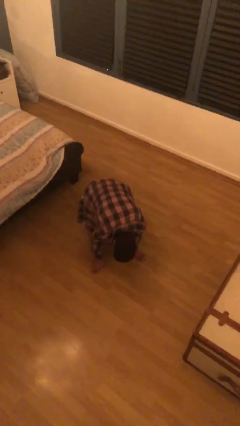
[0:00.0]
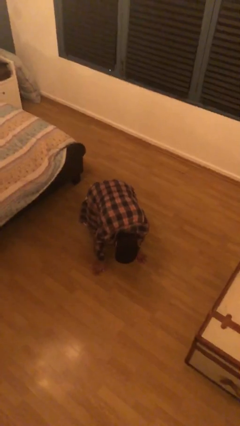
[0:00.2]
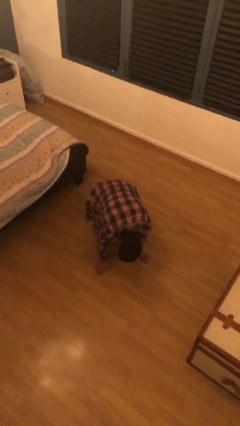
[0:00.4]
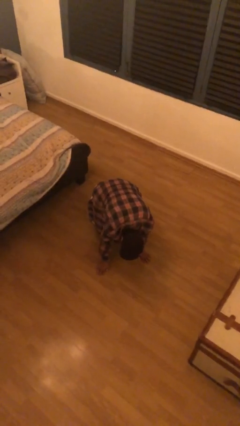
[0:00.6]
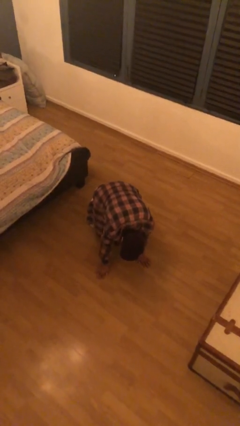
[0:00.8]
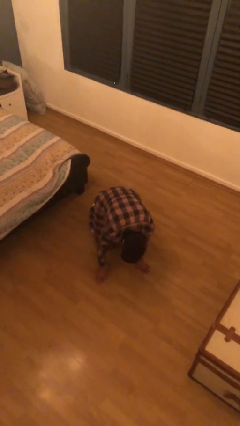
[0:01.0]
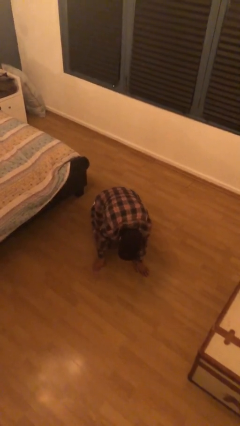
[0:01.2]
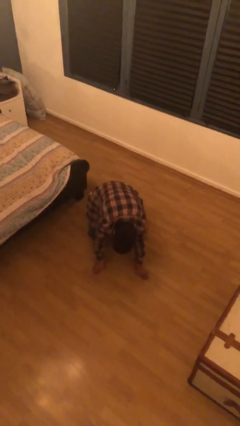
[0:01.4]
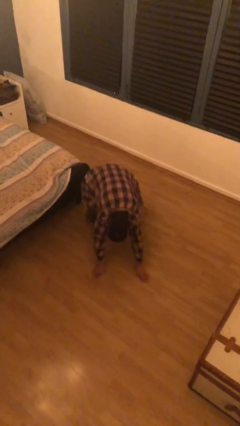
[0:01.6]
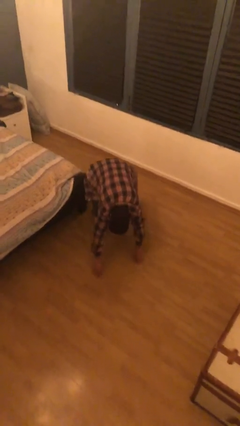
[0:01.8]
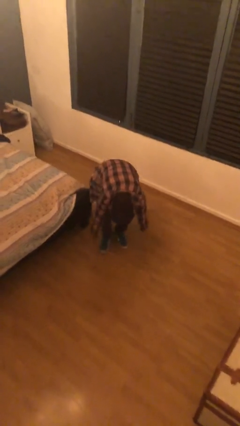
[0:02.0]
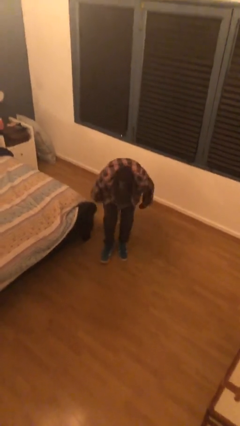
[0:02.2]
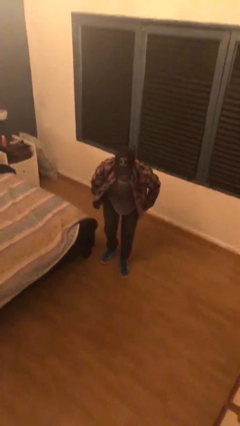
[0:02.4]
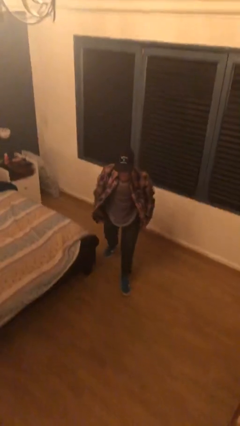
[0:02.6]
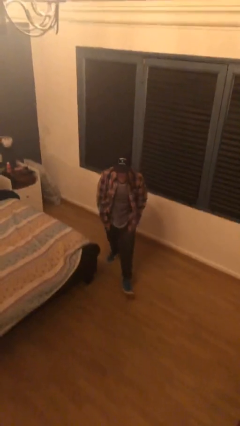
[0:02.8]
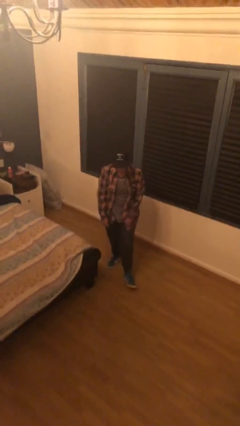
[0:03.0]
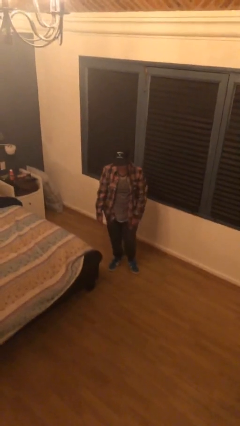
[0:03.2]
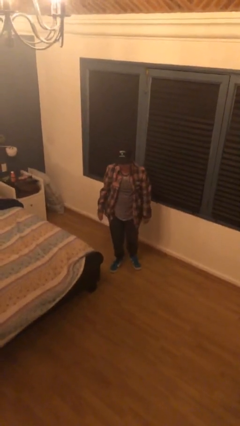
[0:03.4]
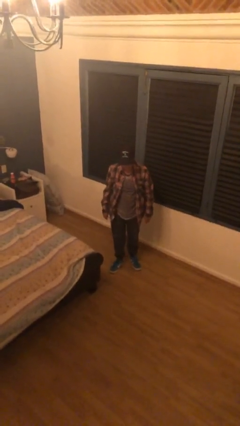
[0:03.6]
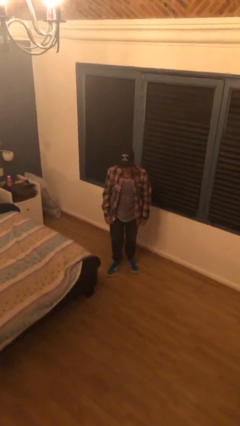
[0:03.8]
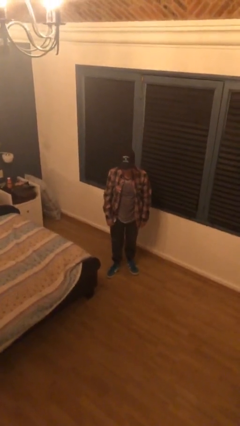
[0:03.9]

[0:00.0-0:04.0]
person stands up from floor

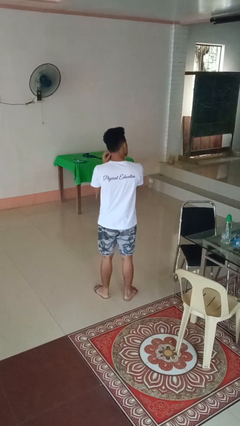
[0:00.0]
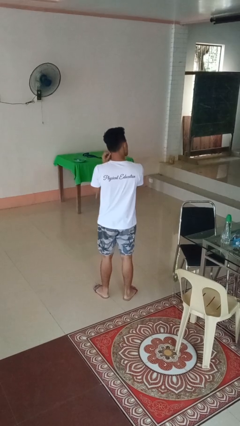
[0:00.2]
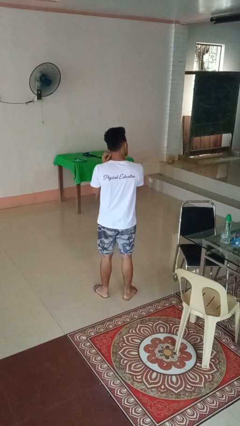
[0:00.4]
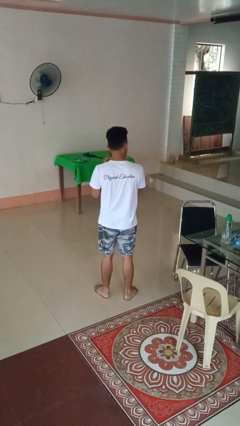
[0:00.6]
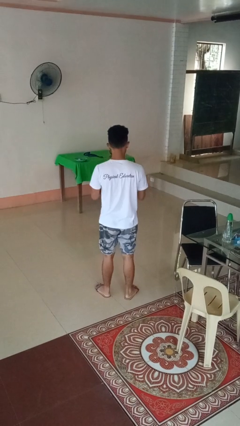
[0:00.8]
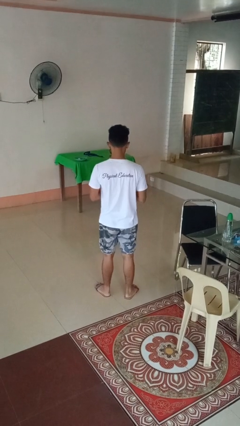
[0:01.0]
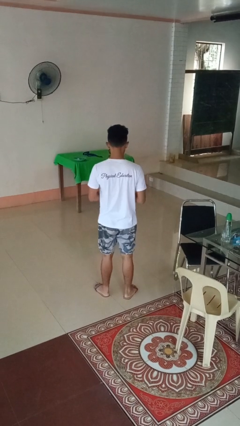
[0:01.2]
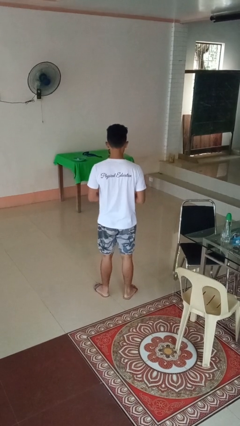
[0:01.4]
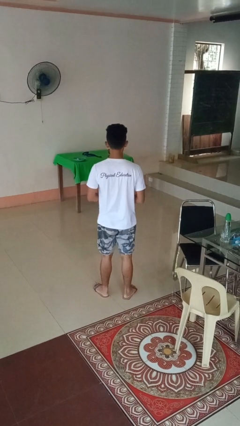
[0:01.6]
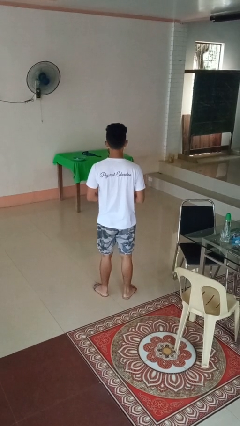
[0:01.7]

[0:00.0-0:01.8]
person takes off earrings

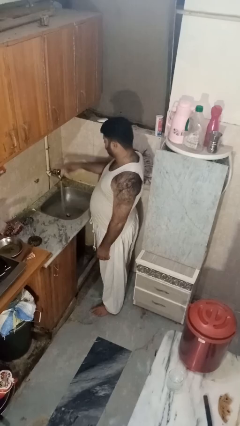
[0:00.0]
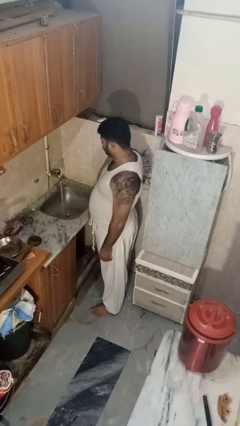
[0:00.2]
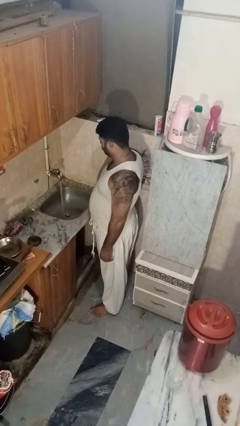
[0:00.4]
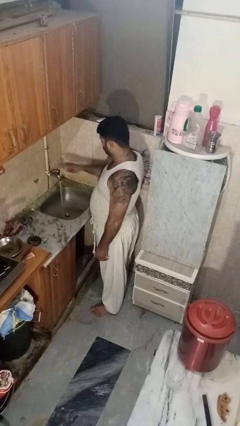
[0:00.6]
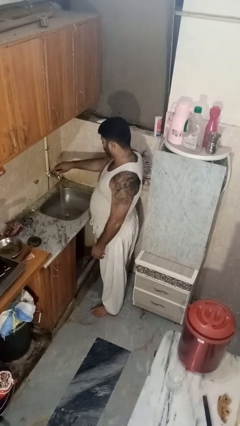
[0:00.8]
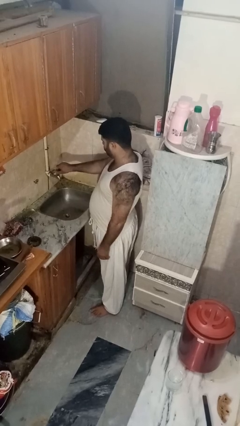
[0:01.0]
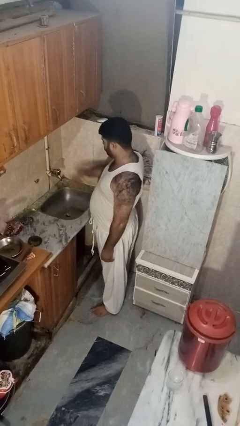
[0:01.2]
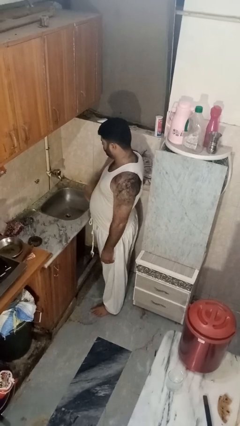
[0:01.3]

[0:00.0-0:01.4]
person turns off faucet

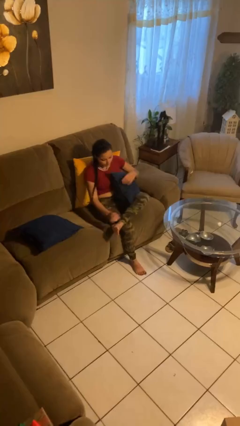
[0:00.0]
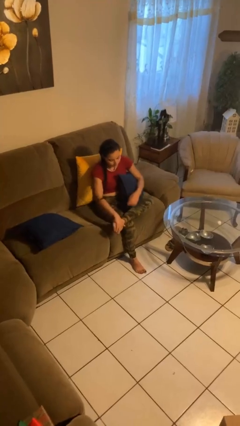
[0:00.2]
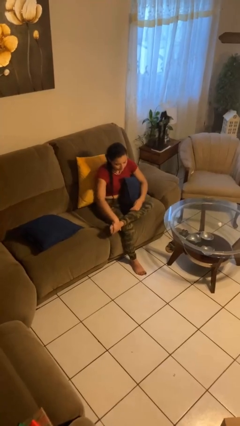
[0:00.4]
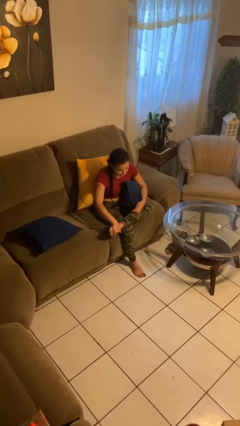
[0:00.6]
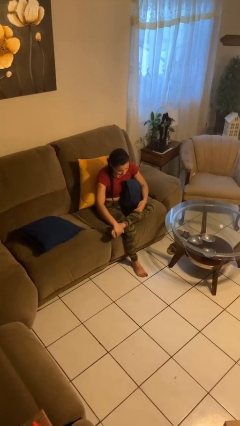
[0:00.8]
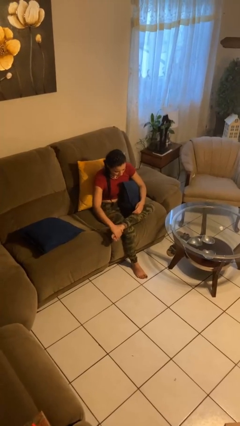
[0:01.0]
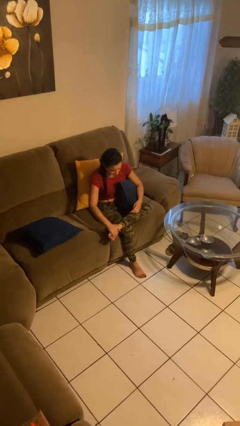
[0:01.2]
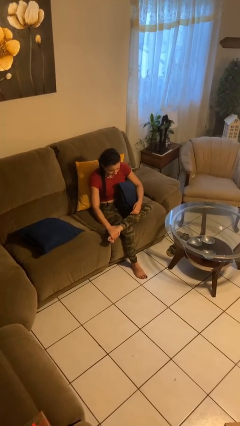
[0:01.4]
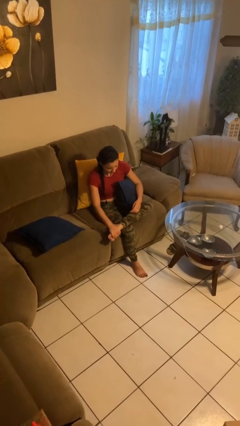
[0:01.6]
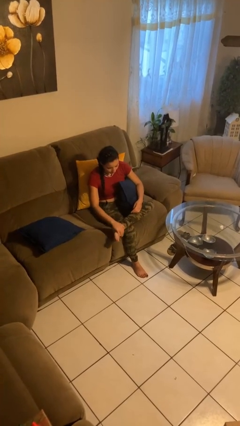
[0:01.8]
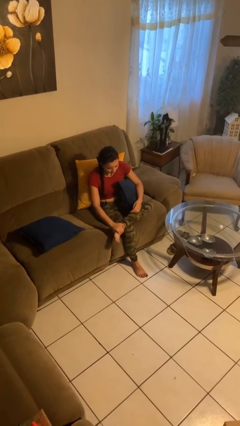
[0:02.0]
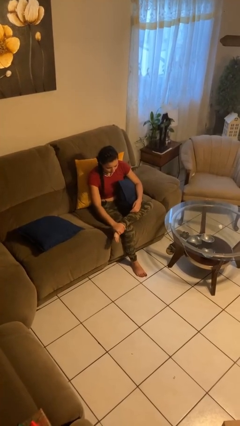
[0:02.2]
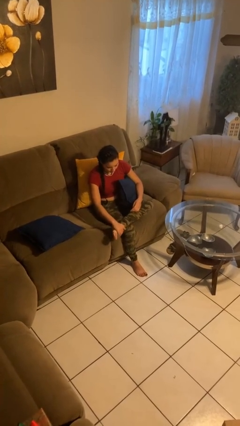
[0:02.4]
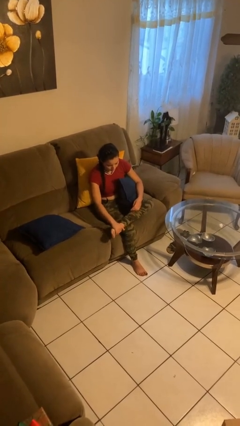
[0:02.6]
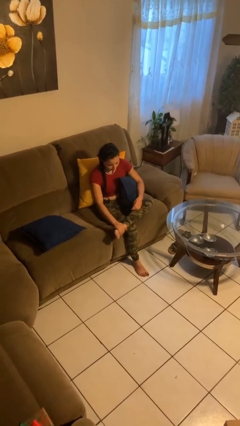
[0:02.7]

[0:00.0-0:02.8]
person rubs foot

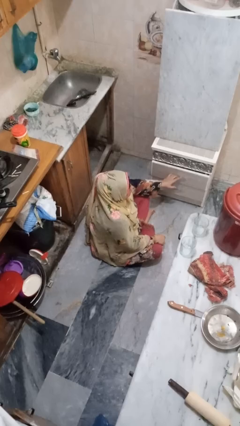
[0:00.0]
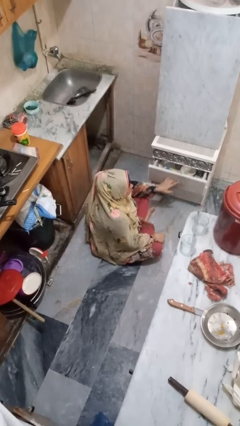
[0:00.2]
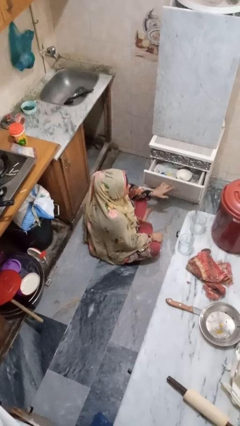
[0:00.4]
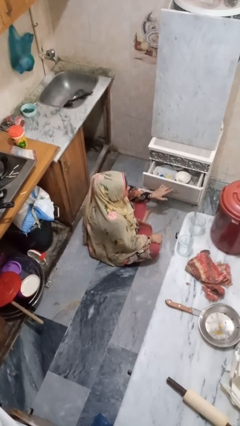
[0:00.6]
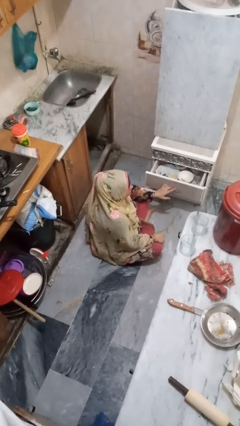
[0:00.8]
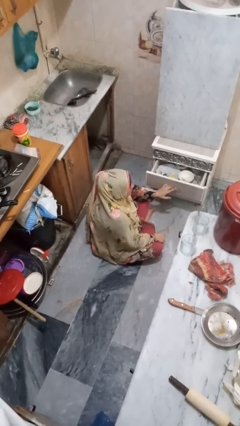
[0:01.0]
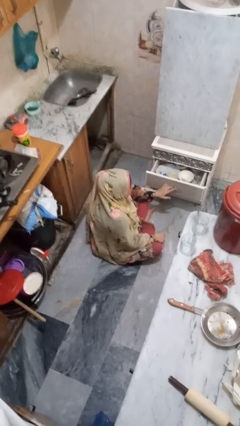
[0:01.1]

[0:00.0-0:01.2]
person opens kitchen drawer

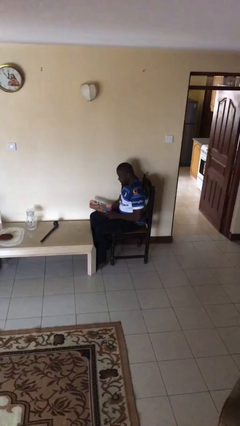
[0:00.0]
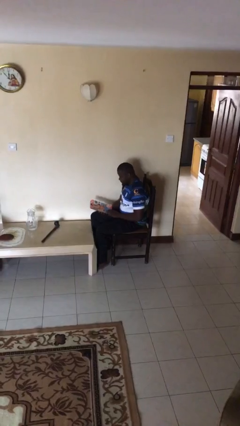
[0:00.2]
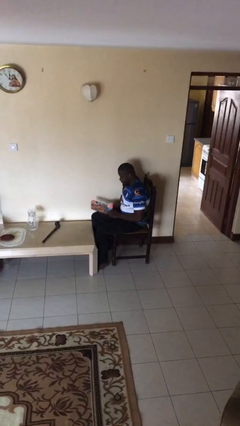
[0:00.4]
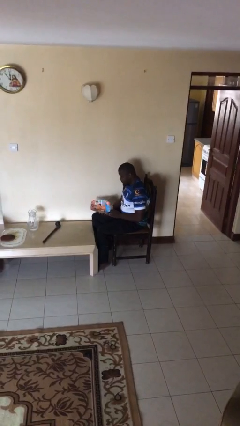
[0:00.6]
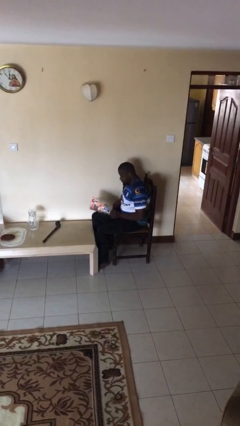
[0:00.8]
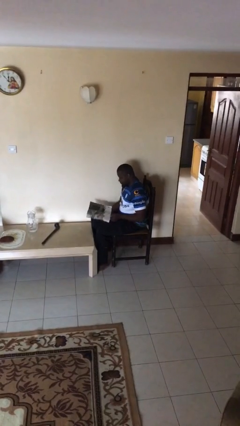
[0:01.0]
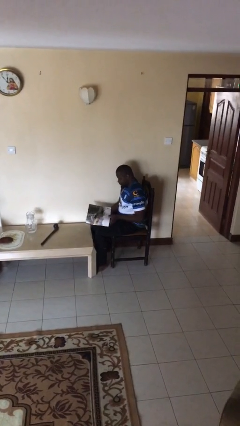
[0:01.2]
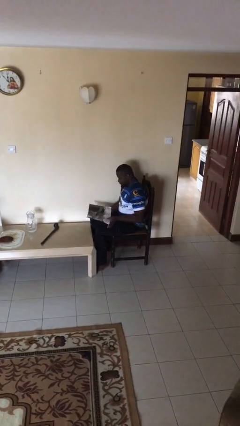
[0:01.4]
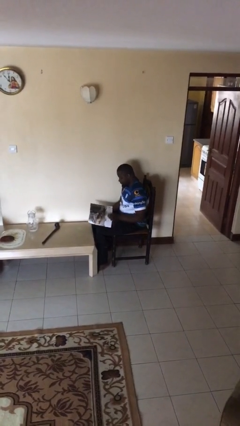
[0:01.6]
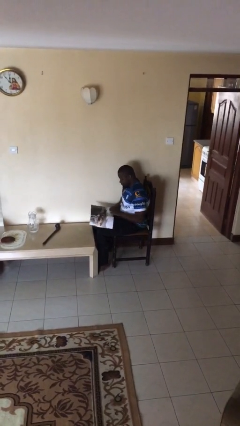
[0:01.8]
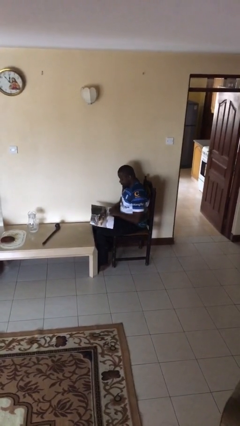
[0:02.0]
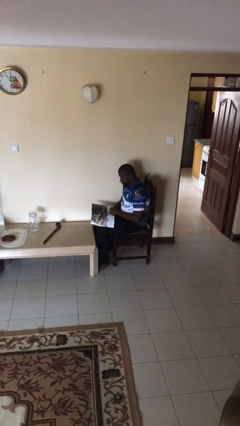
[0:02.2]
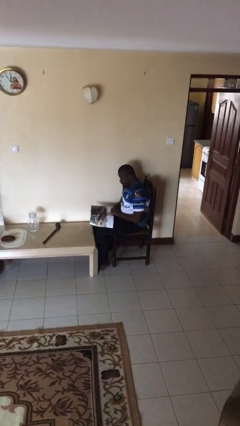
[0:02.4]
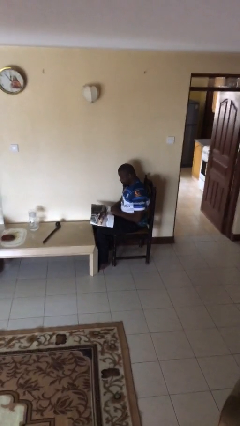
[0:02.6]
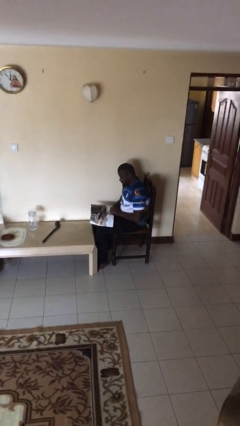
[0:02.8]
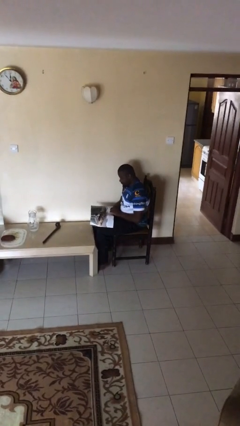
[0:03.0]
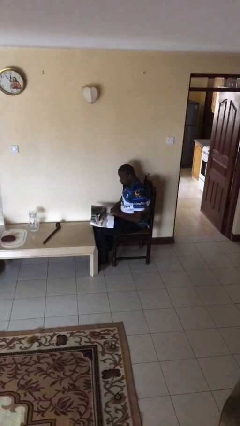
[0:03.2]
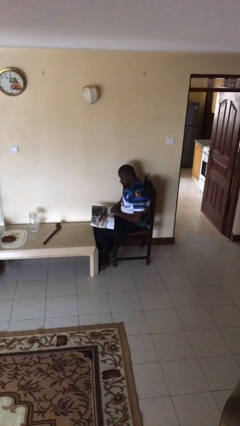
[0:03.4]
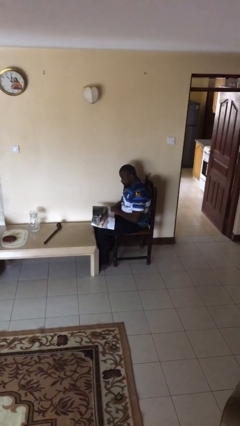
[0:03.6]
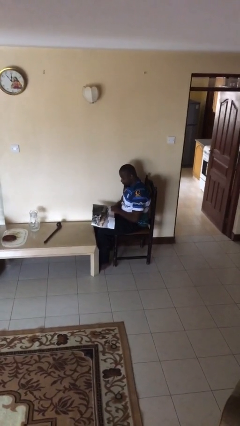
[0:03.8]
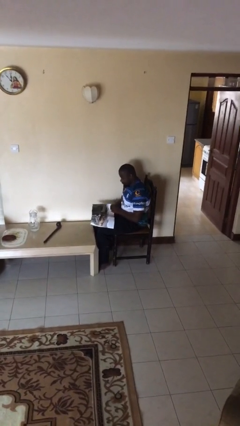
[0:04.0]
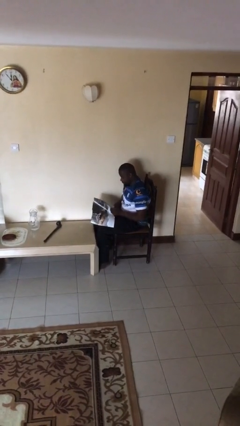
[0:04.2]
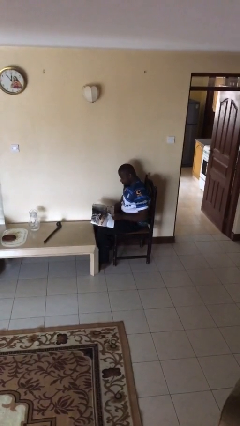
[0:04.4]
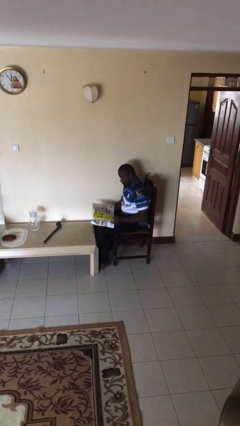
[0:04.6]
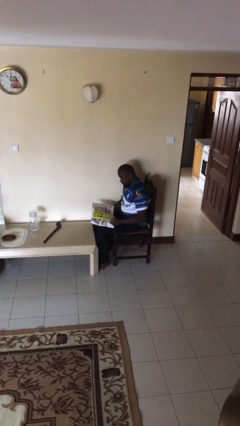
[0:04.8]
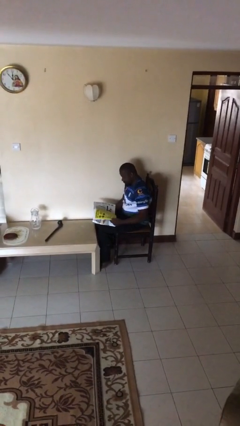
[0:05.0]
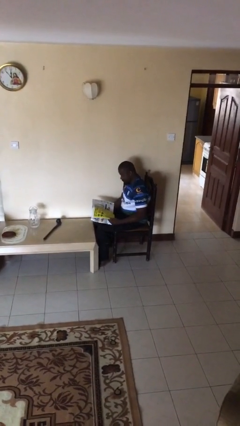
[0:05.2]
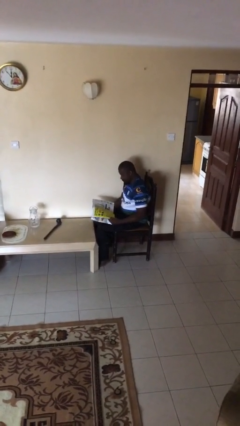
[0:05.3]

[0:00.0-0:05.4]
person reads document

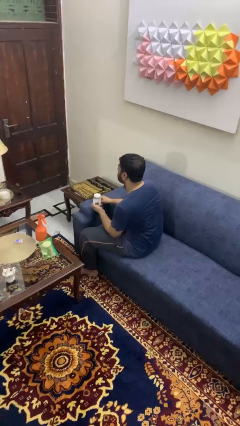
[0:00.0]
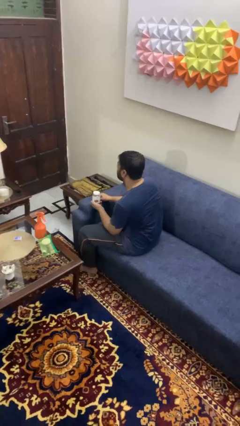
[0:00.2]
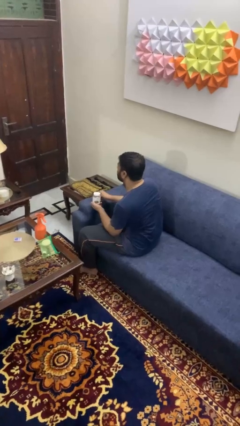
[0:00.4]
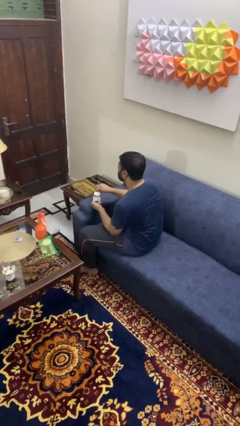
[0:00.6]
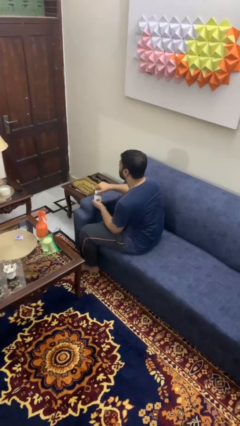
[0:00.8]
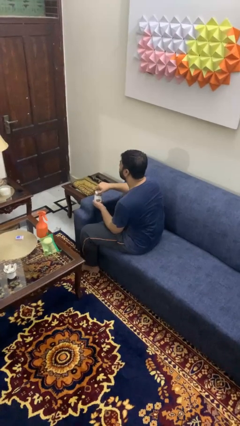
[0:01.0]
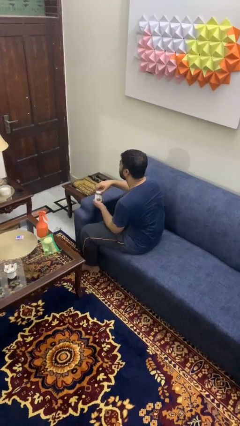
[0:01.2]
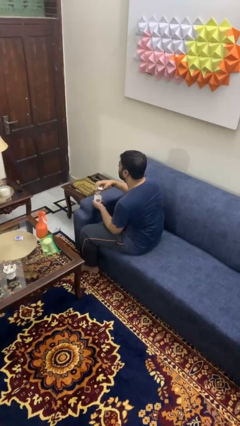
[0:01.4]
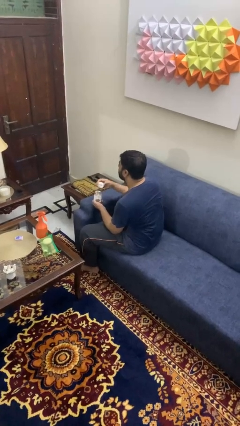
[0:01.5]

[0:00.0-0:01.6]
person opens jar
